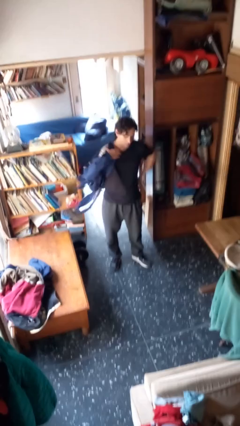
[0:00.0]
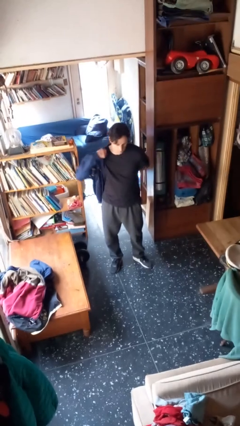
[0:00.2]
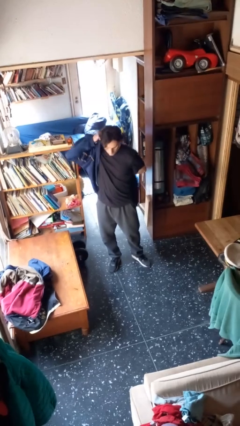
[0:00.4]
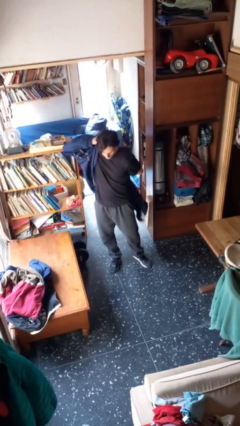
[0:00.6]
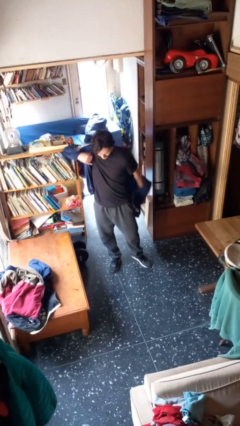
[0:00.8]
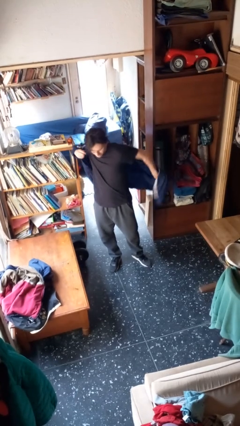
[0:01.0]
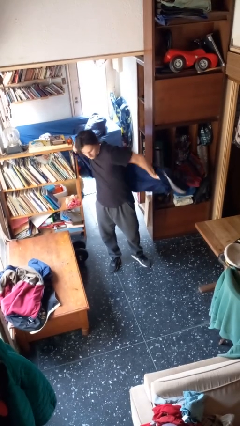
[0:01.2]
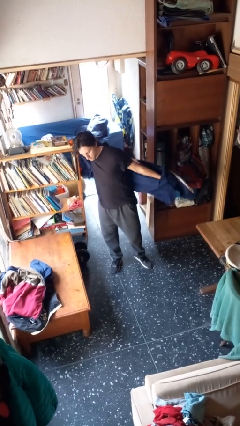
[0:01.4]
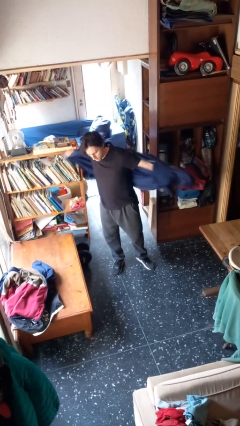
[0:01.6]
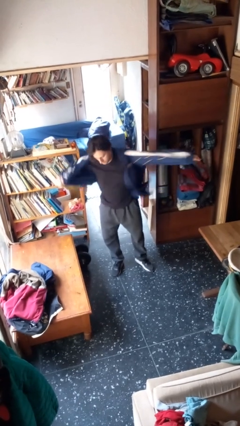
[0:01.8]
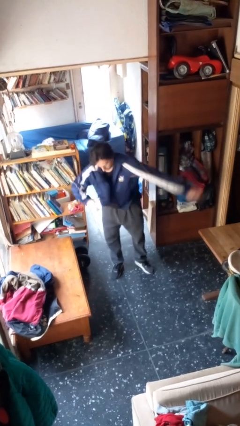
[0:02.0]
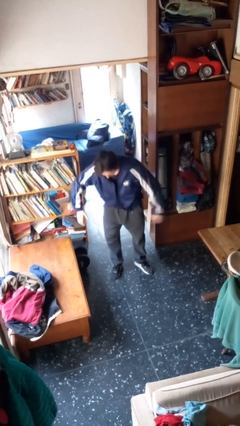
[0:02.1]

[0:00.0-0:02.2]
person puts on jacket

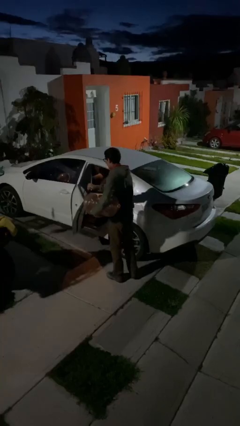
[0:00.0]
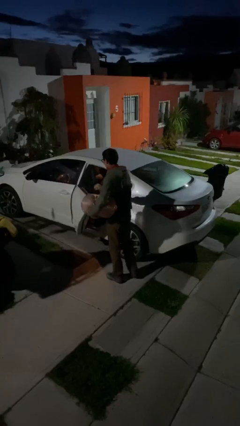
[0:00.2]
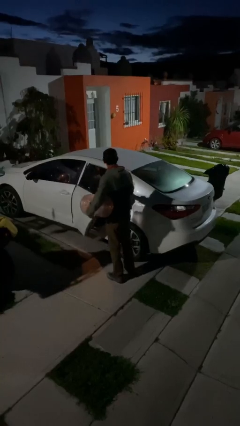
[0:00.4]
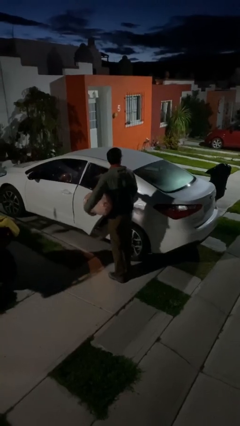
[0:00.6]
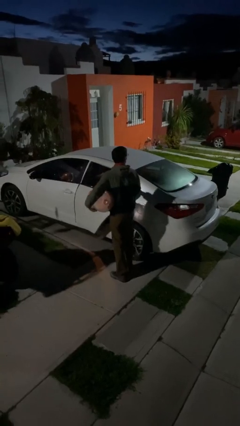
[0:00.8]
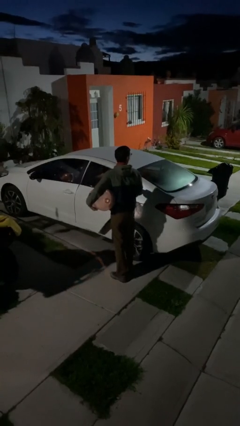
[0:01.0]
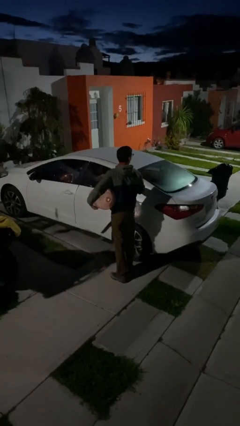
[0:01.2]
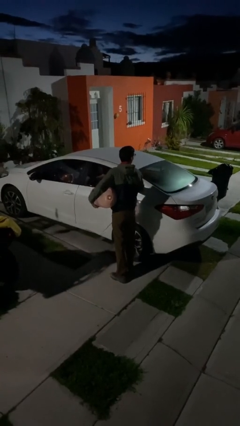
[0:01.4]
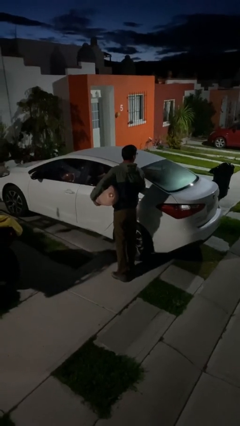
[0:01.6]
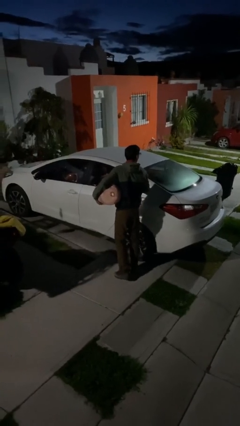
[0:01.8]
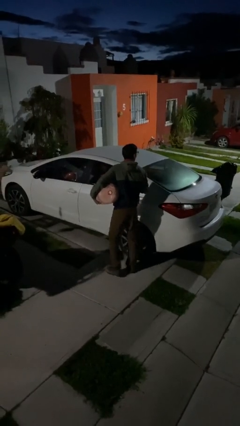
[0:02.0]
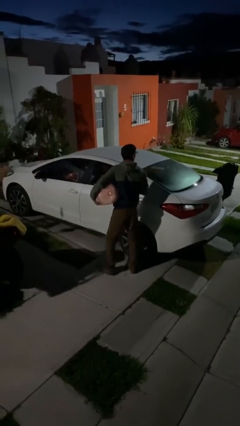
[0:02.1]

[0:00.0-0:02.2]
person closes car door

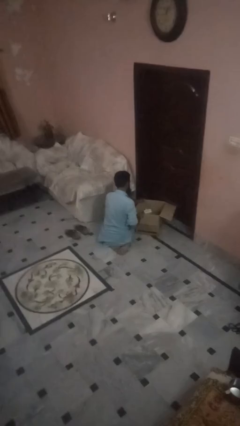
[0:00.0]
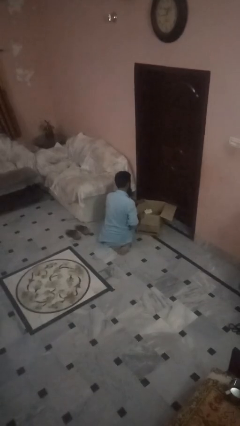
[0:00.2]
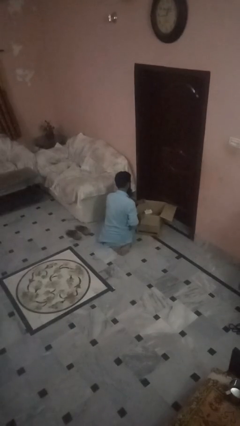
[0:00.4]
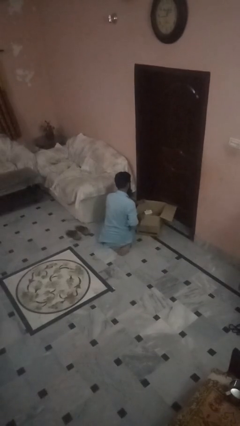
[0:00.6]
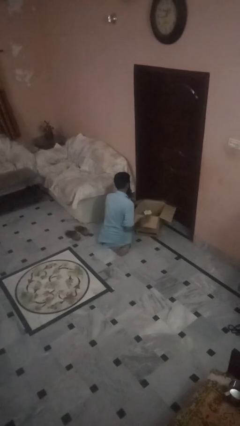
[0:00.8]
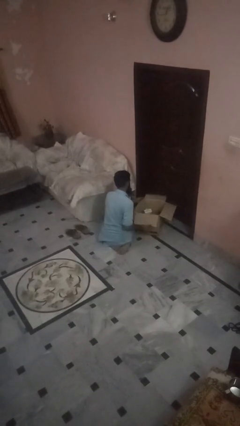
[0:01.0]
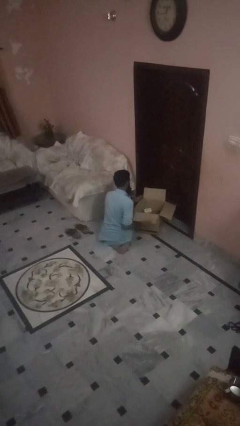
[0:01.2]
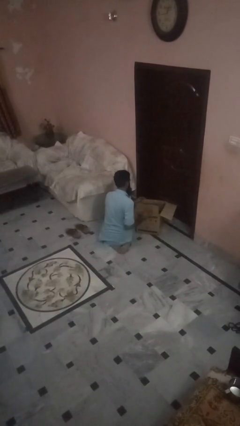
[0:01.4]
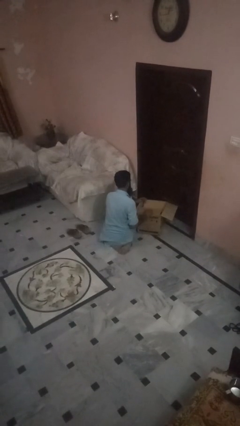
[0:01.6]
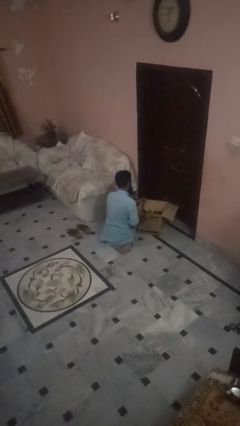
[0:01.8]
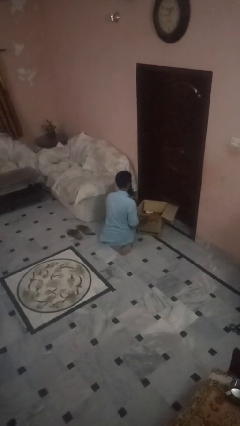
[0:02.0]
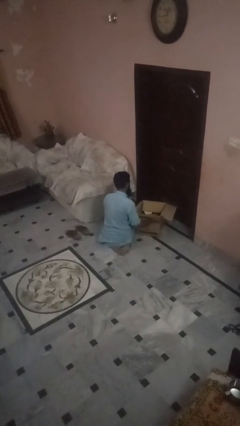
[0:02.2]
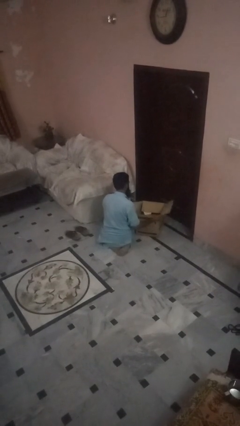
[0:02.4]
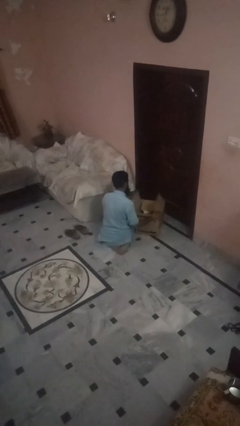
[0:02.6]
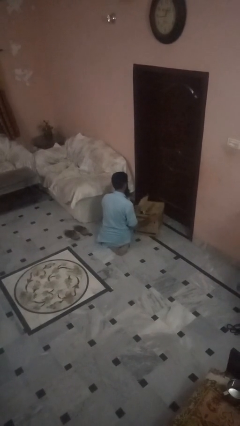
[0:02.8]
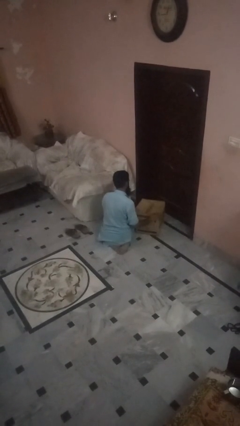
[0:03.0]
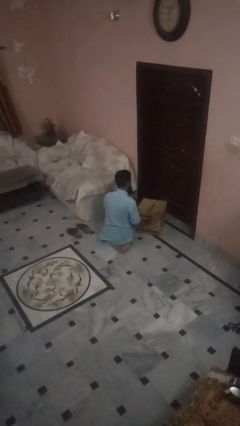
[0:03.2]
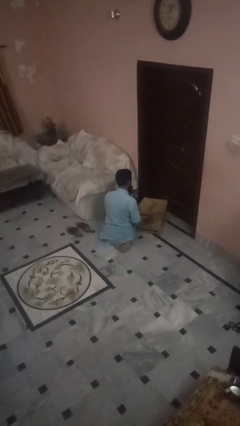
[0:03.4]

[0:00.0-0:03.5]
person closes box

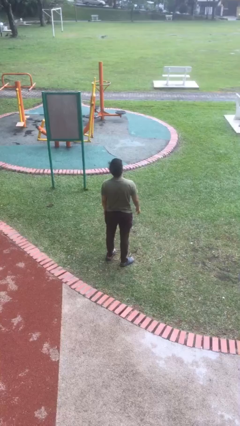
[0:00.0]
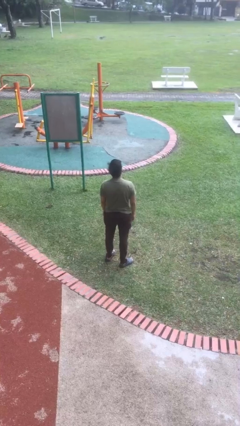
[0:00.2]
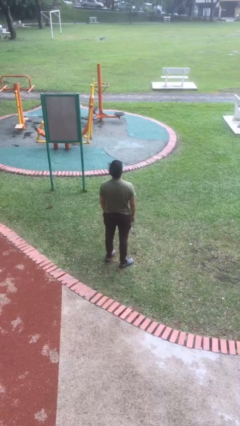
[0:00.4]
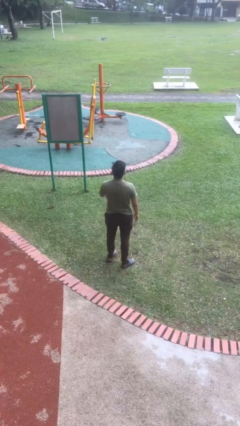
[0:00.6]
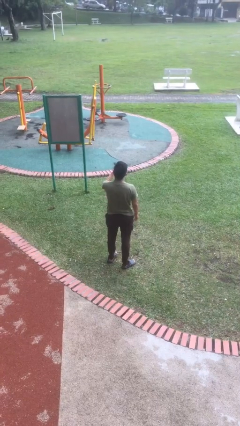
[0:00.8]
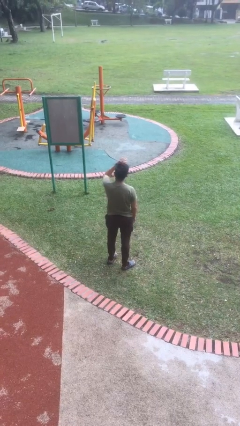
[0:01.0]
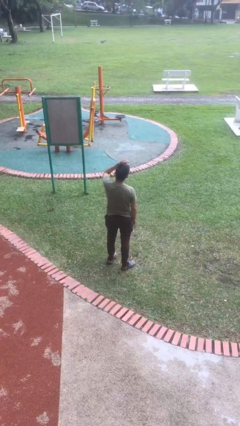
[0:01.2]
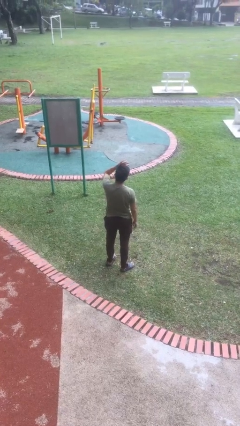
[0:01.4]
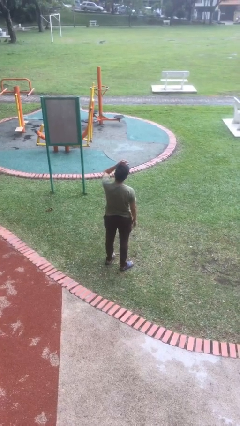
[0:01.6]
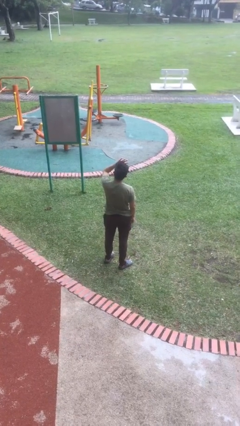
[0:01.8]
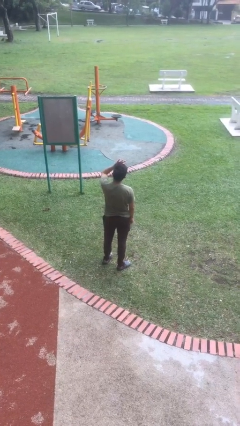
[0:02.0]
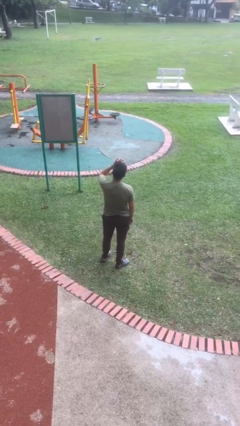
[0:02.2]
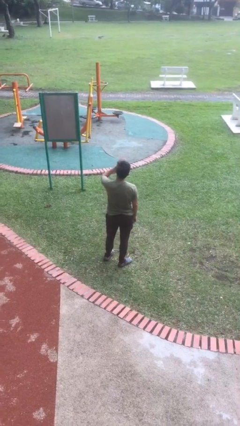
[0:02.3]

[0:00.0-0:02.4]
person shades eyes

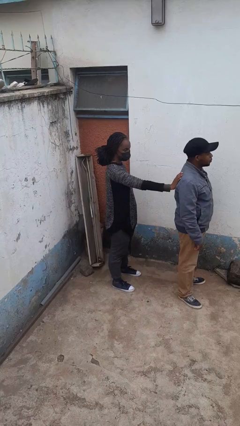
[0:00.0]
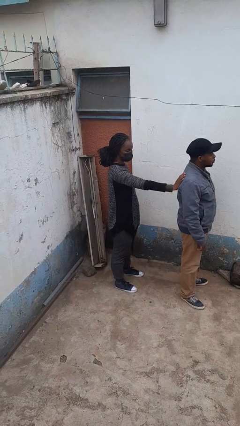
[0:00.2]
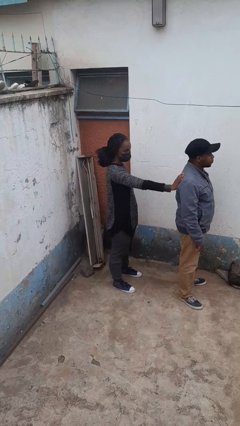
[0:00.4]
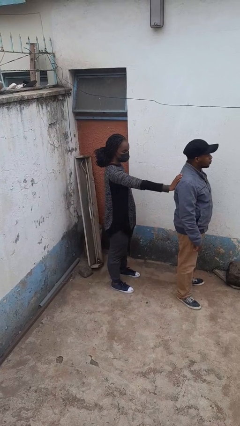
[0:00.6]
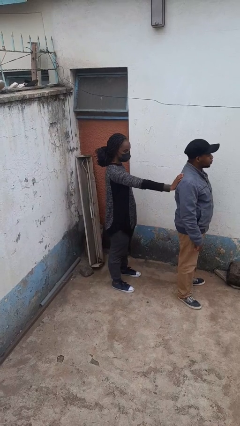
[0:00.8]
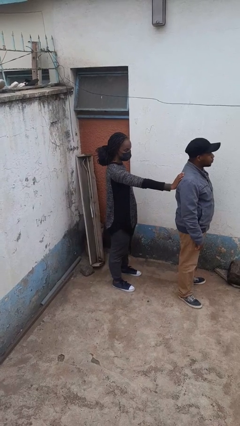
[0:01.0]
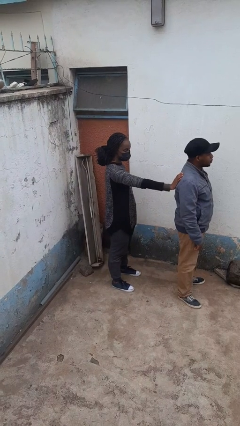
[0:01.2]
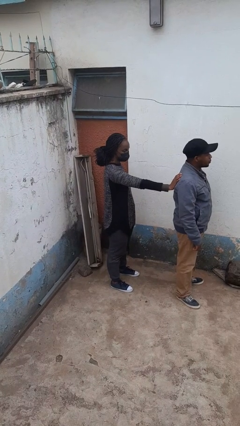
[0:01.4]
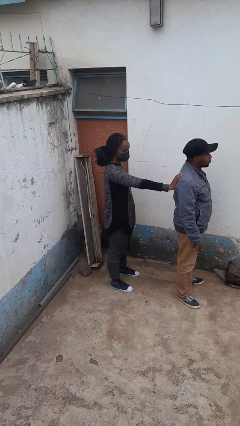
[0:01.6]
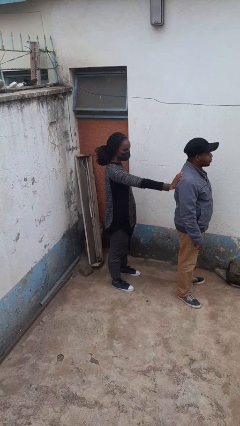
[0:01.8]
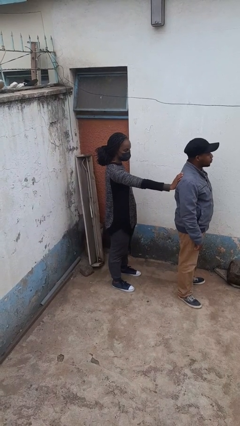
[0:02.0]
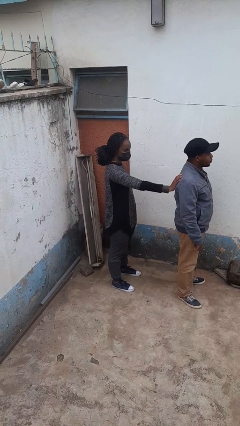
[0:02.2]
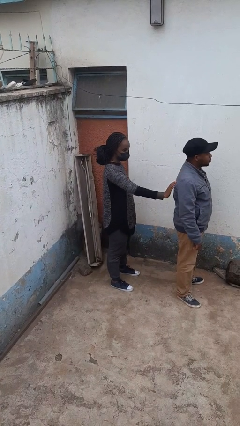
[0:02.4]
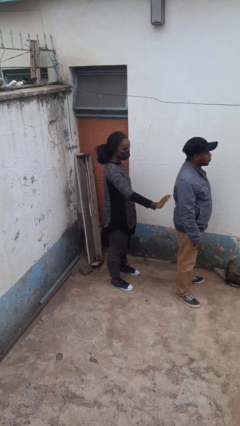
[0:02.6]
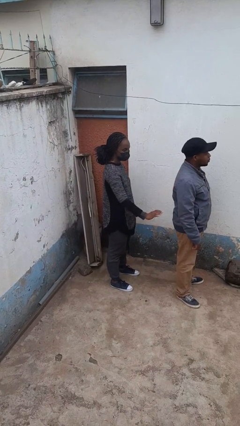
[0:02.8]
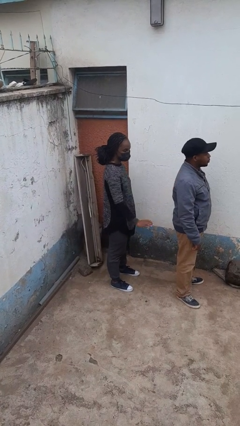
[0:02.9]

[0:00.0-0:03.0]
person touches back of person

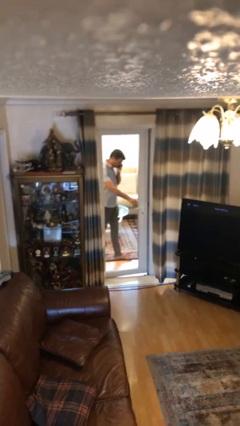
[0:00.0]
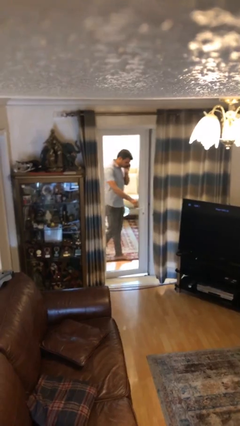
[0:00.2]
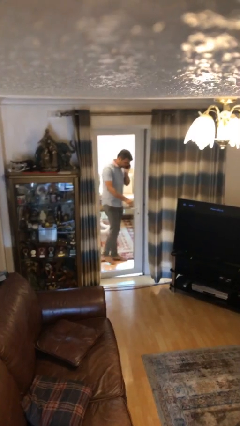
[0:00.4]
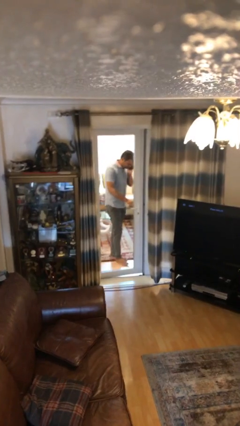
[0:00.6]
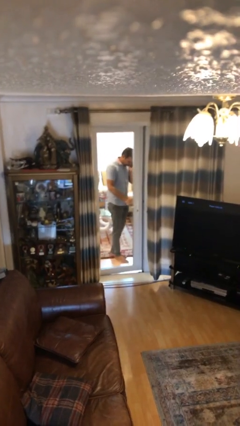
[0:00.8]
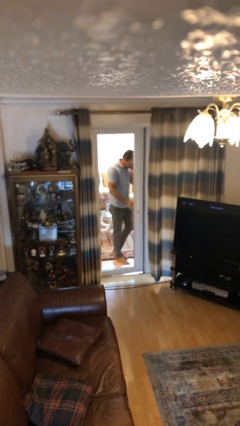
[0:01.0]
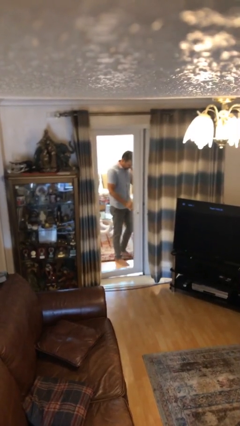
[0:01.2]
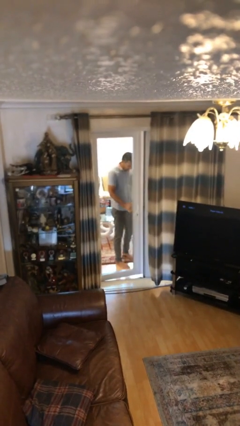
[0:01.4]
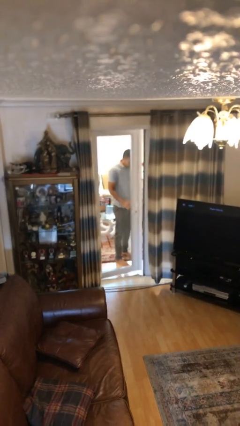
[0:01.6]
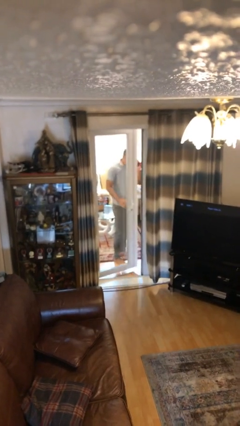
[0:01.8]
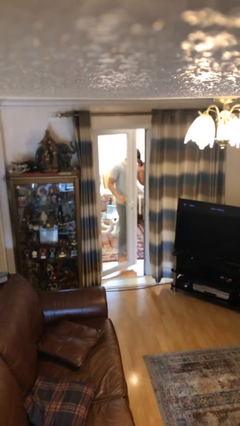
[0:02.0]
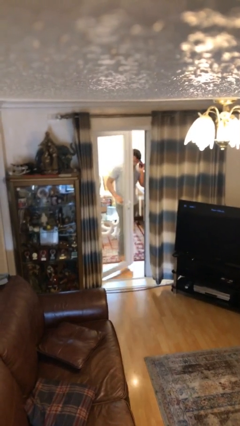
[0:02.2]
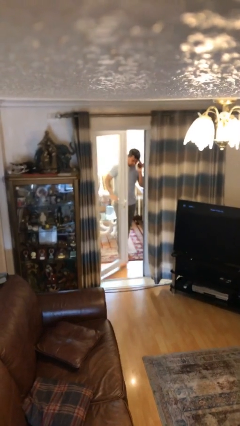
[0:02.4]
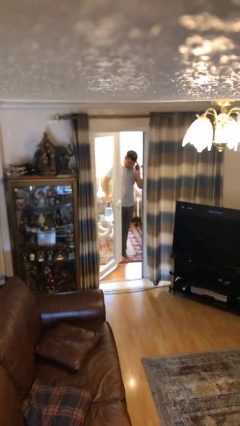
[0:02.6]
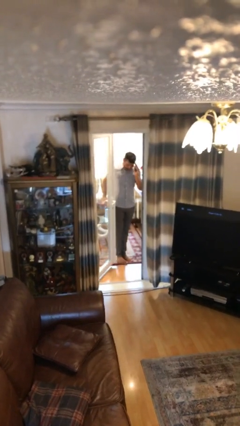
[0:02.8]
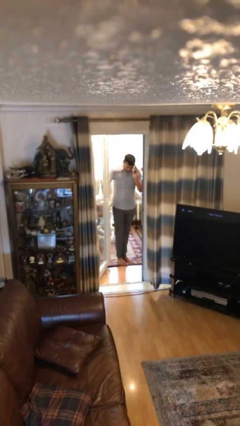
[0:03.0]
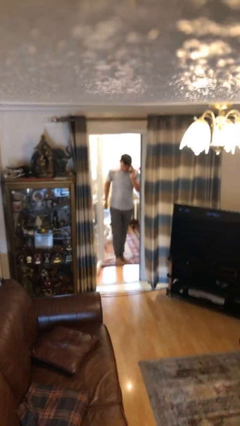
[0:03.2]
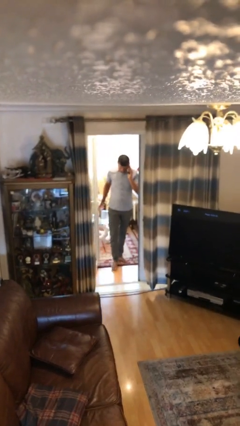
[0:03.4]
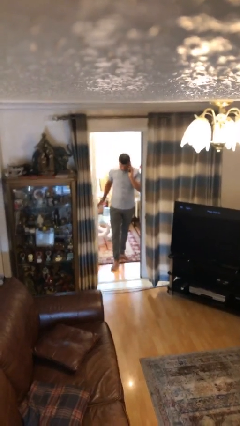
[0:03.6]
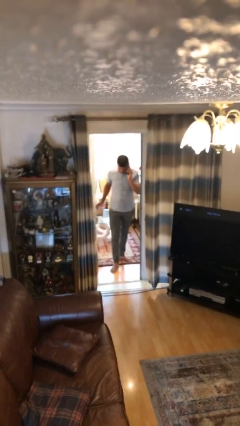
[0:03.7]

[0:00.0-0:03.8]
person opens facility door

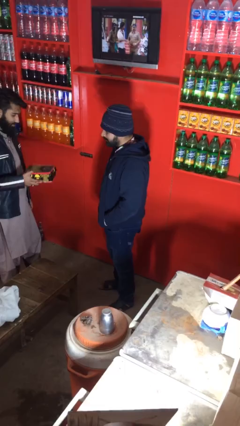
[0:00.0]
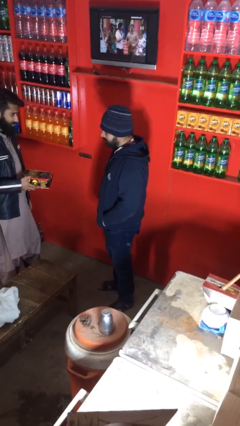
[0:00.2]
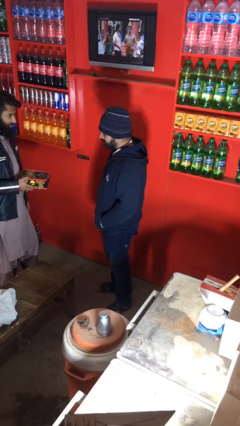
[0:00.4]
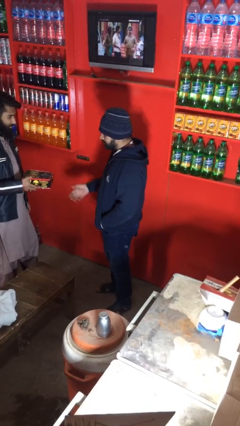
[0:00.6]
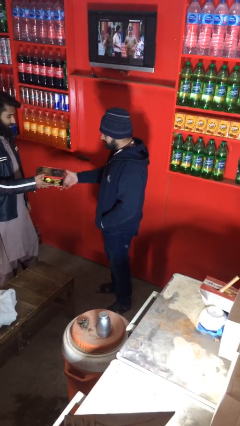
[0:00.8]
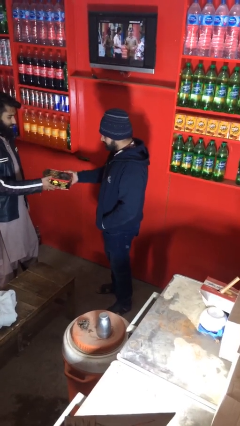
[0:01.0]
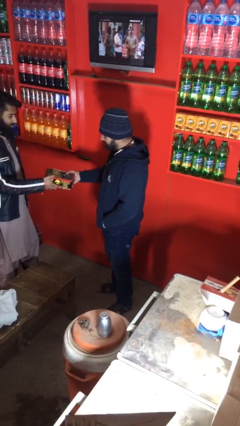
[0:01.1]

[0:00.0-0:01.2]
person transfers object to person
